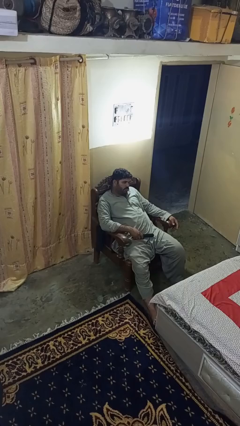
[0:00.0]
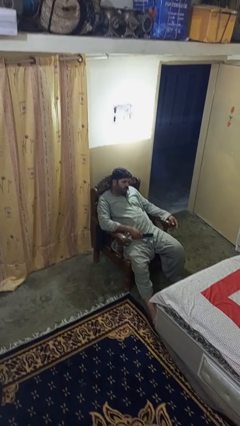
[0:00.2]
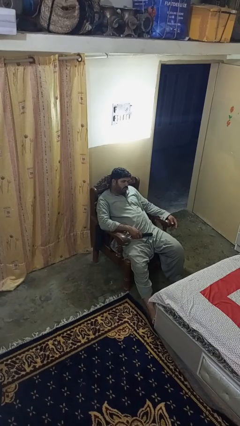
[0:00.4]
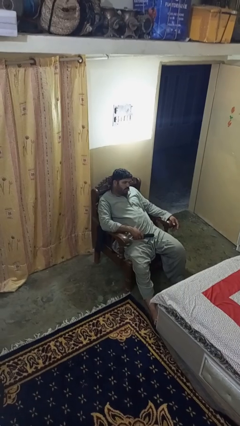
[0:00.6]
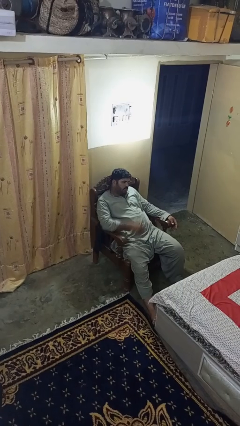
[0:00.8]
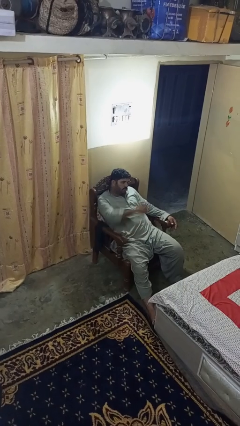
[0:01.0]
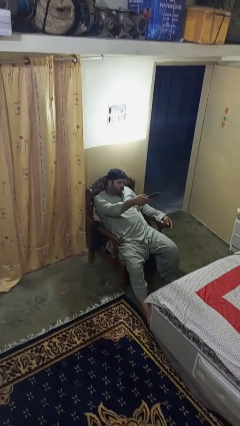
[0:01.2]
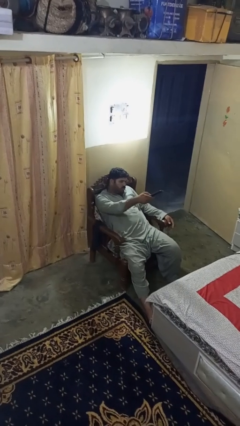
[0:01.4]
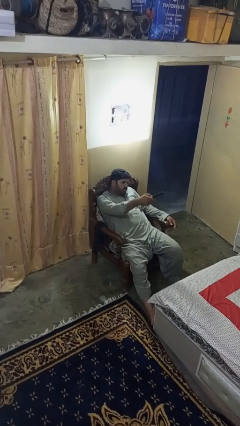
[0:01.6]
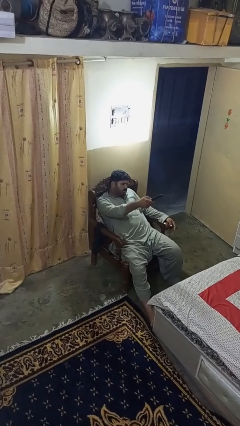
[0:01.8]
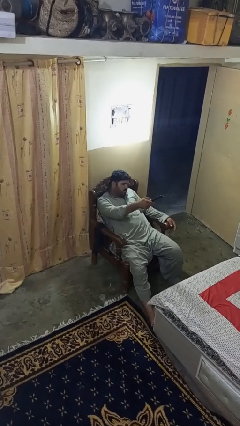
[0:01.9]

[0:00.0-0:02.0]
person uses television remote

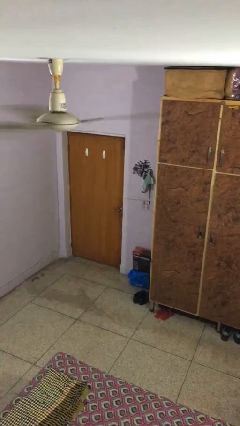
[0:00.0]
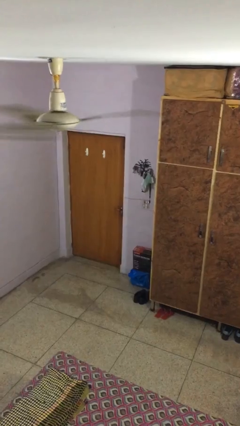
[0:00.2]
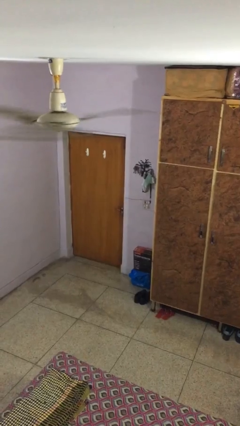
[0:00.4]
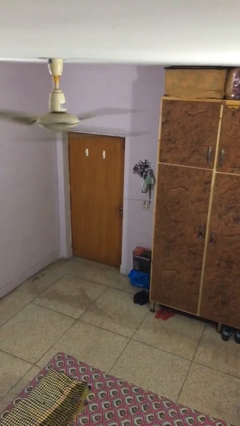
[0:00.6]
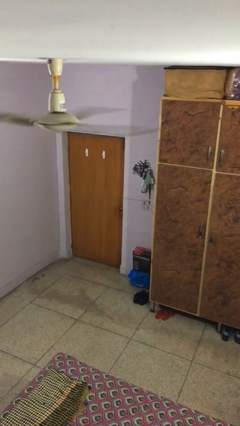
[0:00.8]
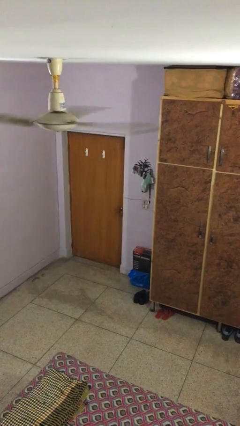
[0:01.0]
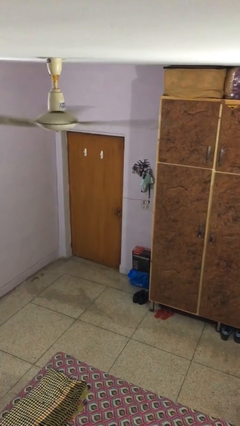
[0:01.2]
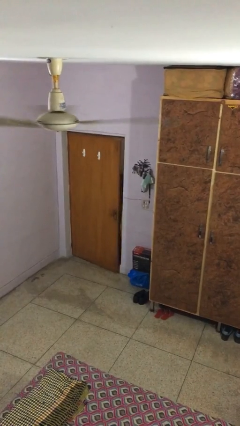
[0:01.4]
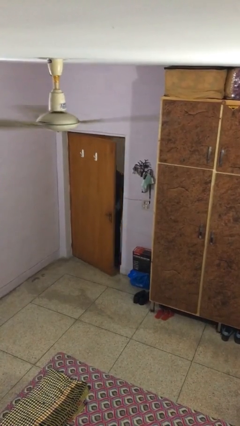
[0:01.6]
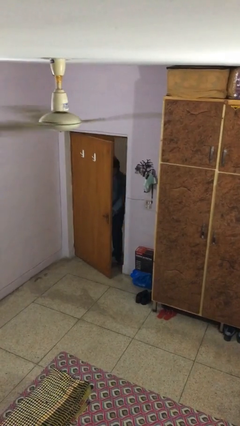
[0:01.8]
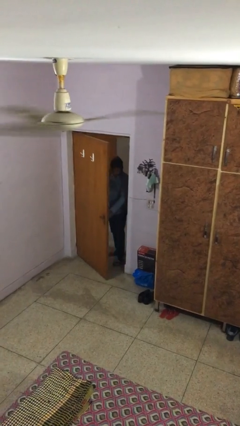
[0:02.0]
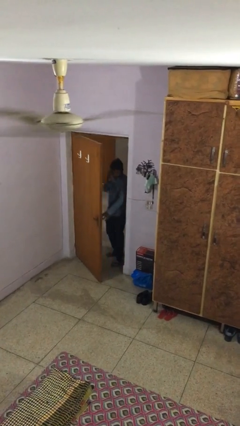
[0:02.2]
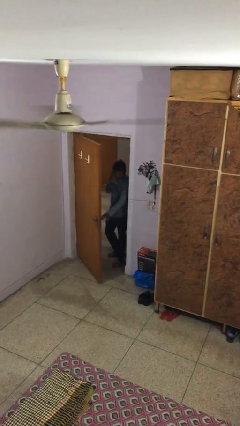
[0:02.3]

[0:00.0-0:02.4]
person opens facility door

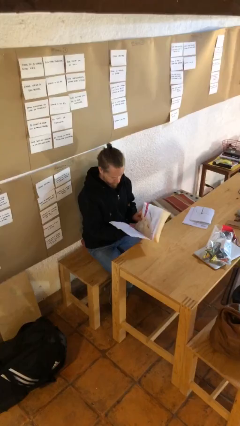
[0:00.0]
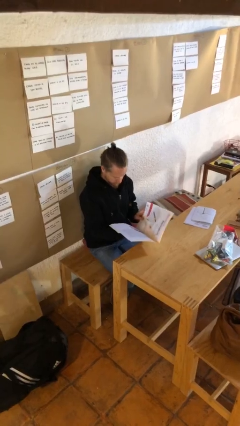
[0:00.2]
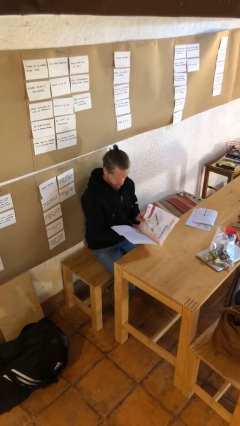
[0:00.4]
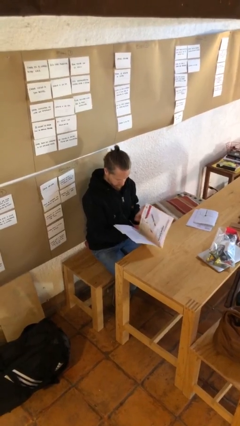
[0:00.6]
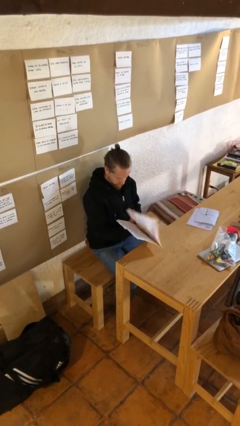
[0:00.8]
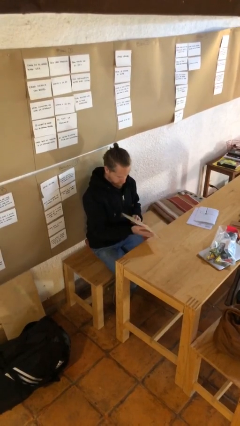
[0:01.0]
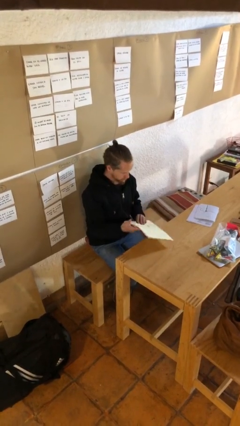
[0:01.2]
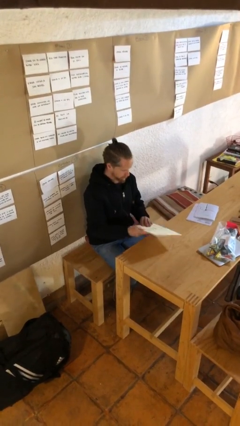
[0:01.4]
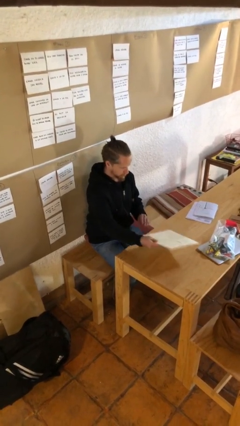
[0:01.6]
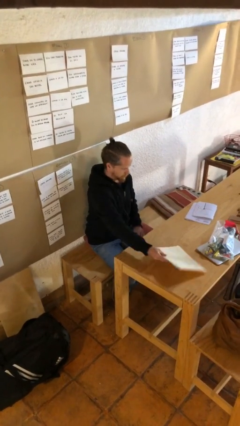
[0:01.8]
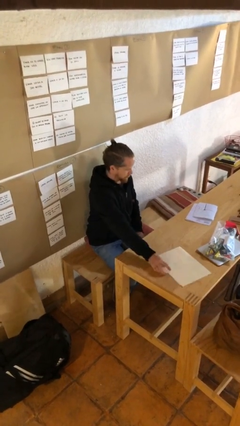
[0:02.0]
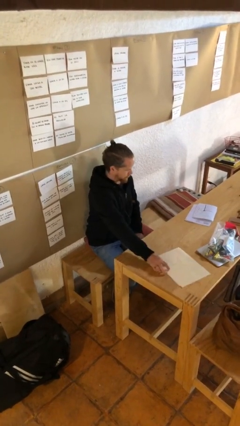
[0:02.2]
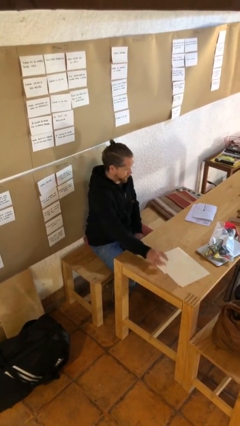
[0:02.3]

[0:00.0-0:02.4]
person puts down object on table

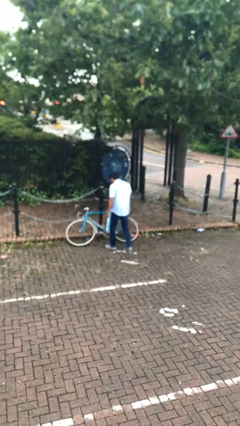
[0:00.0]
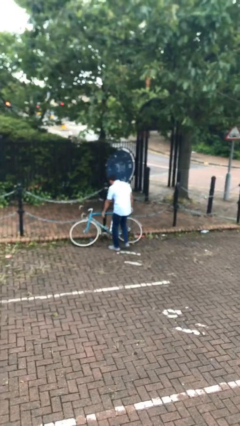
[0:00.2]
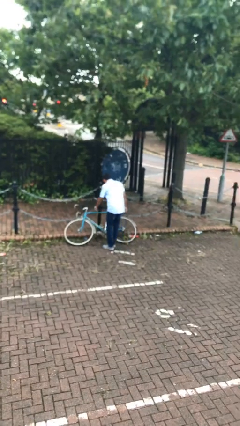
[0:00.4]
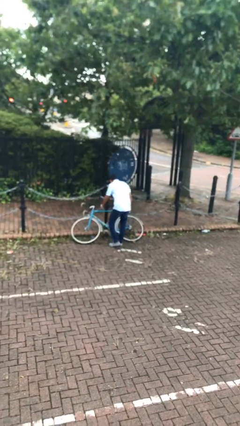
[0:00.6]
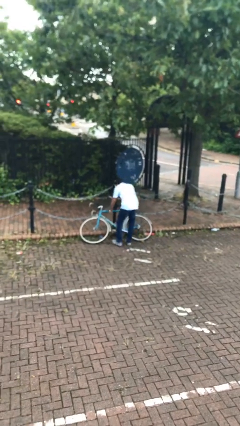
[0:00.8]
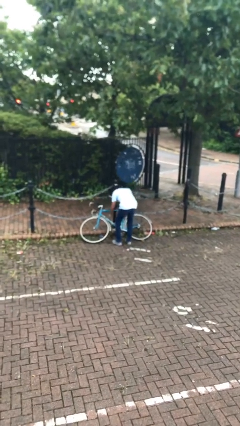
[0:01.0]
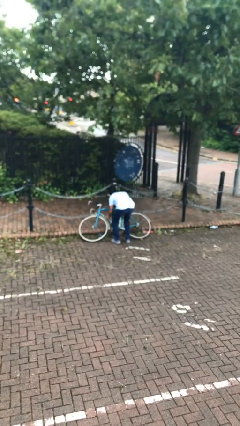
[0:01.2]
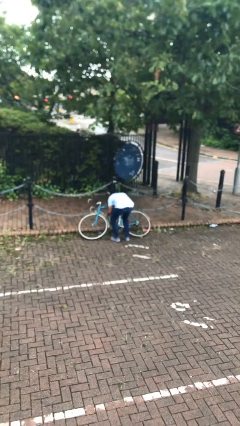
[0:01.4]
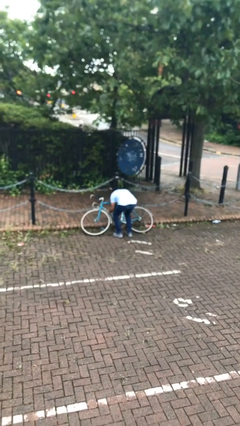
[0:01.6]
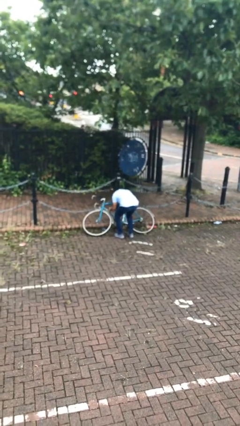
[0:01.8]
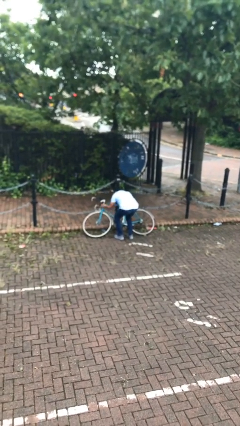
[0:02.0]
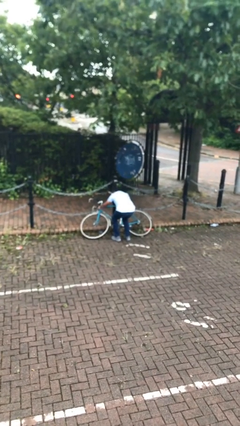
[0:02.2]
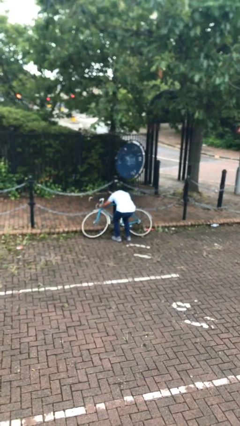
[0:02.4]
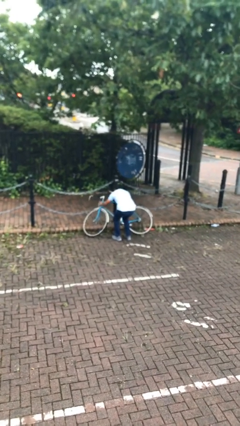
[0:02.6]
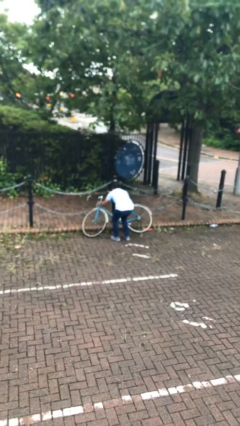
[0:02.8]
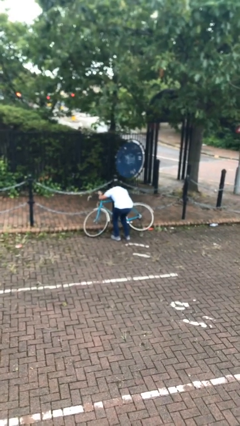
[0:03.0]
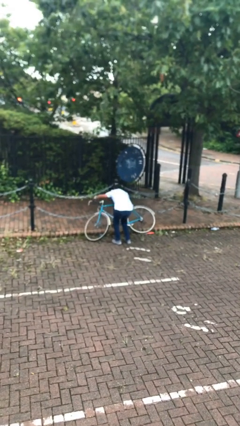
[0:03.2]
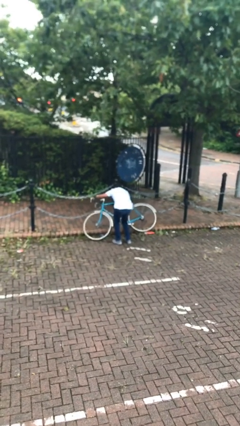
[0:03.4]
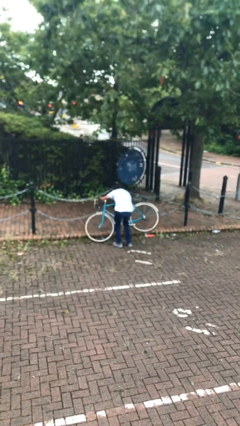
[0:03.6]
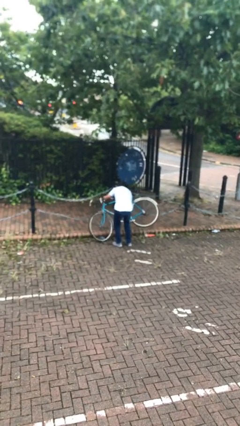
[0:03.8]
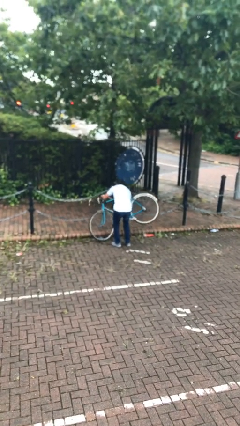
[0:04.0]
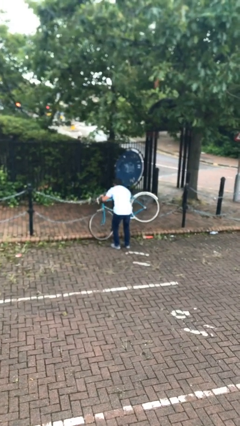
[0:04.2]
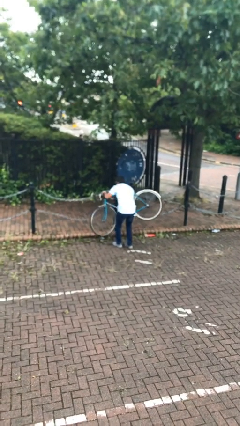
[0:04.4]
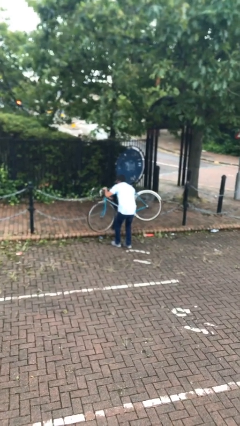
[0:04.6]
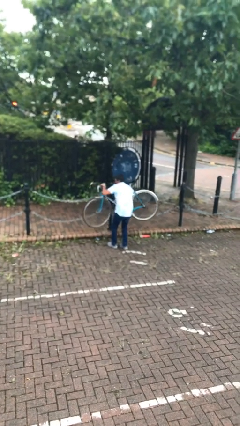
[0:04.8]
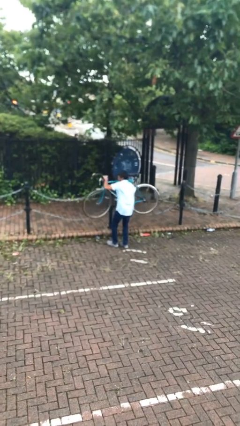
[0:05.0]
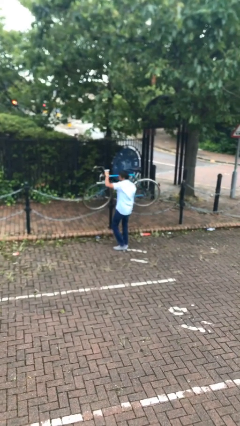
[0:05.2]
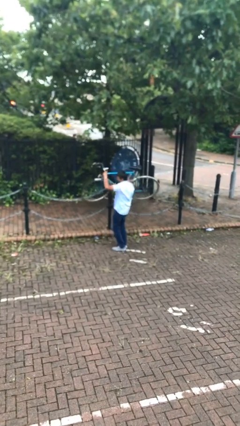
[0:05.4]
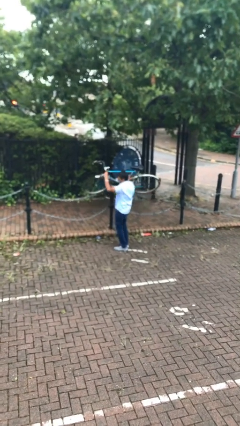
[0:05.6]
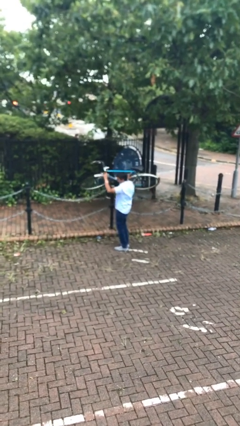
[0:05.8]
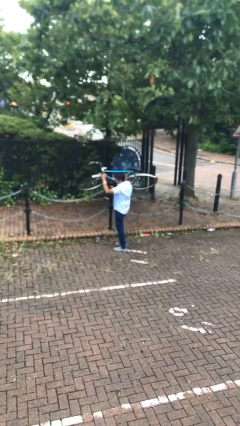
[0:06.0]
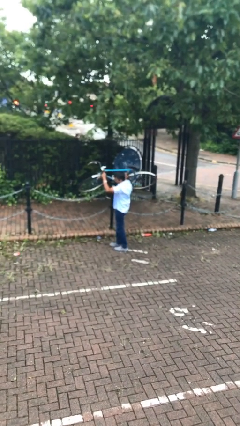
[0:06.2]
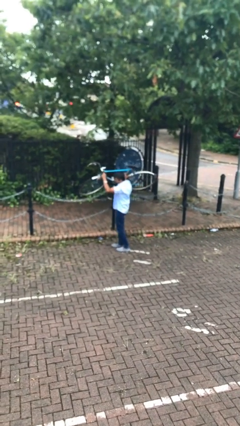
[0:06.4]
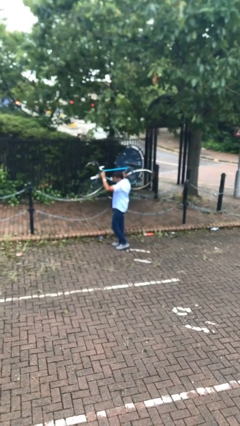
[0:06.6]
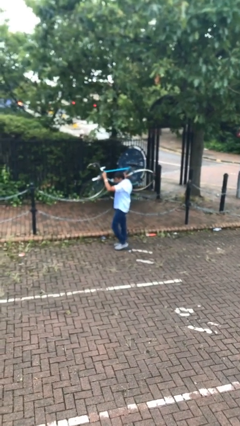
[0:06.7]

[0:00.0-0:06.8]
person picks up object from floor

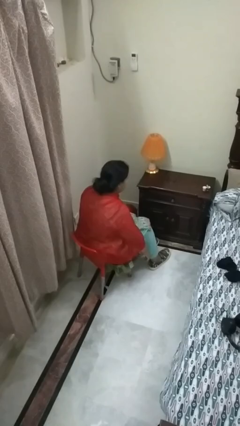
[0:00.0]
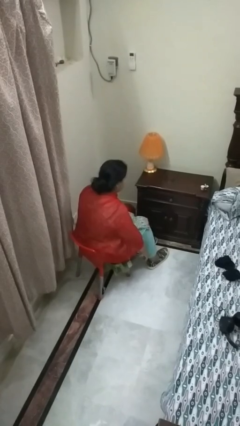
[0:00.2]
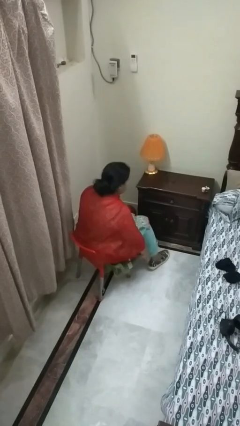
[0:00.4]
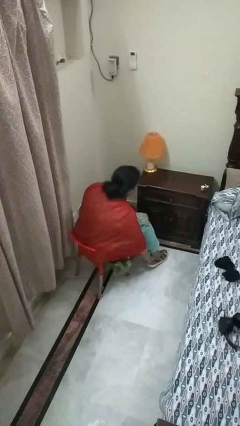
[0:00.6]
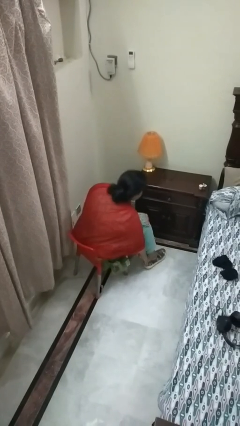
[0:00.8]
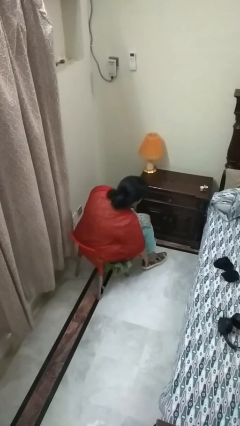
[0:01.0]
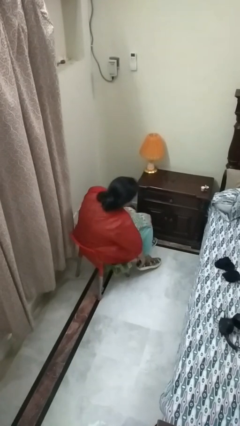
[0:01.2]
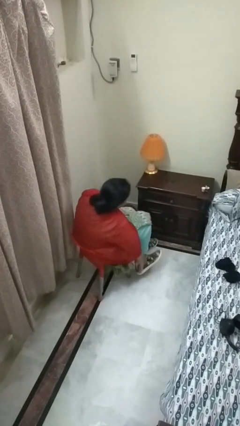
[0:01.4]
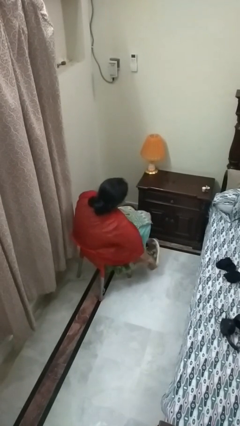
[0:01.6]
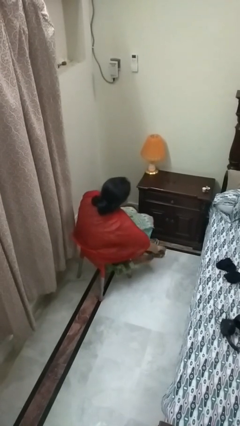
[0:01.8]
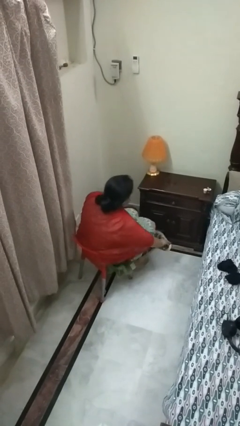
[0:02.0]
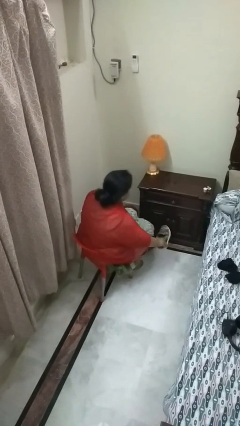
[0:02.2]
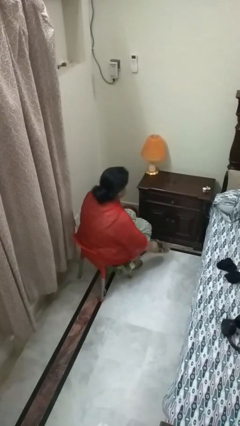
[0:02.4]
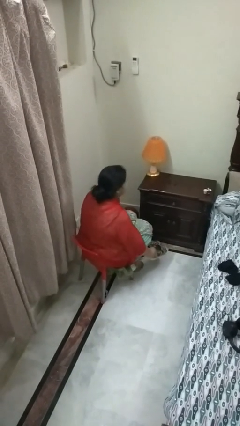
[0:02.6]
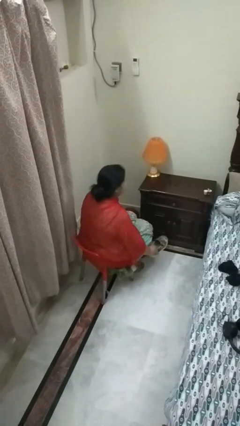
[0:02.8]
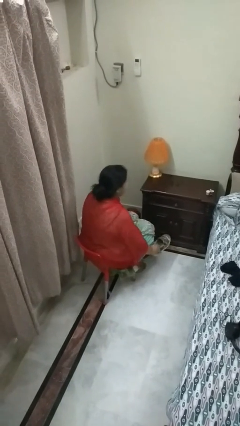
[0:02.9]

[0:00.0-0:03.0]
person takes off shoes

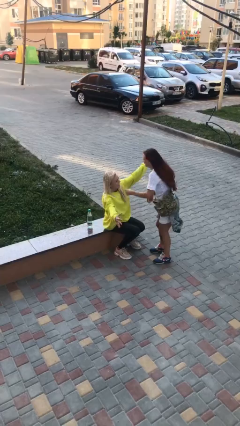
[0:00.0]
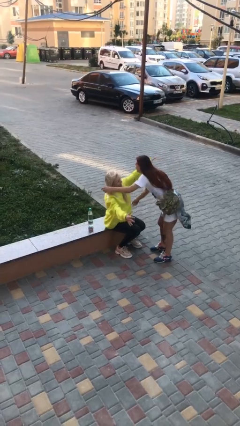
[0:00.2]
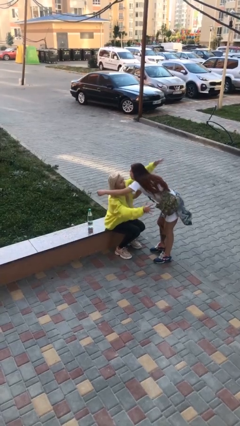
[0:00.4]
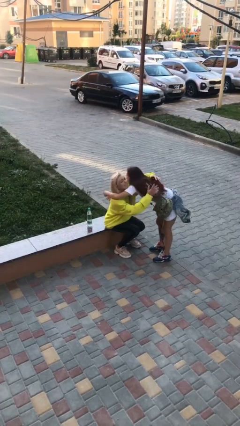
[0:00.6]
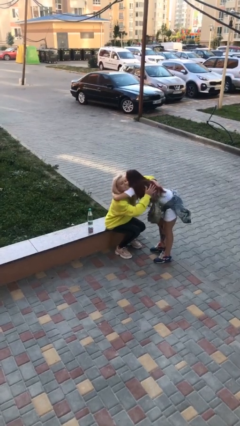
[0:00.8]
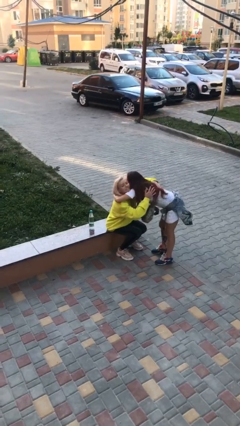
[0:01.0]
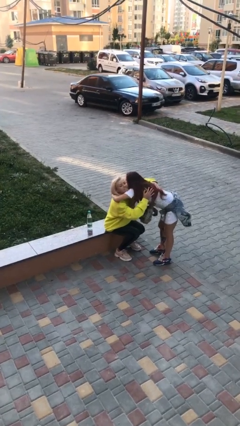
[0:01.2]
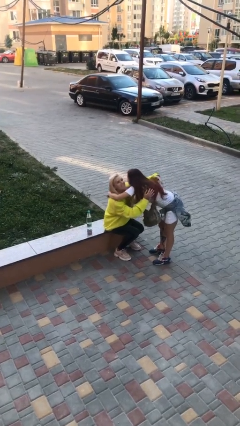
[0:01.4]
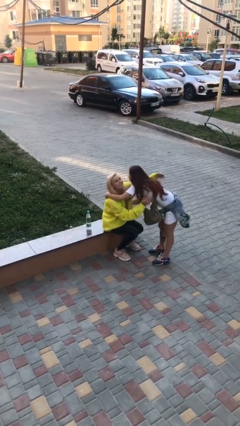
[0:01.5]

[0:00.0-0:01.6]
person embraces person
